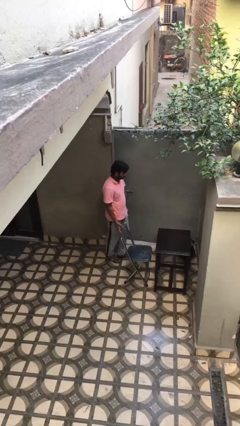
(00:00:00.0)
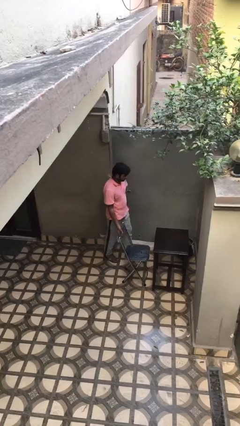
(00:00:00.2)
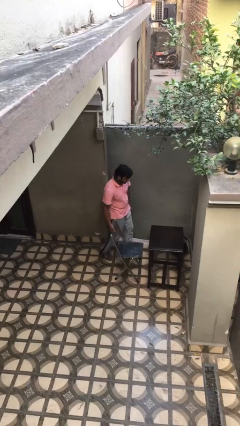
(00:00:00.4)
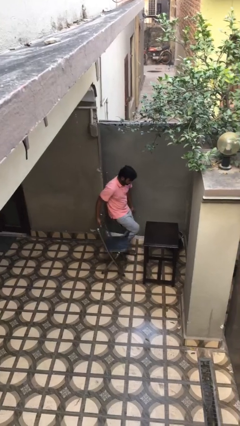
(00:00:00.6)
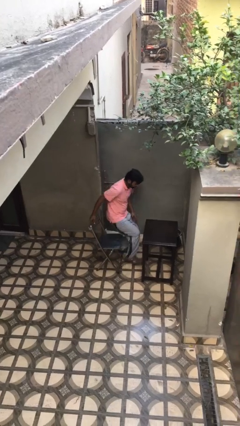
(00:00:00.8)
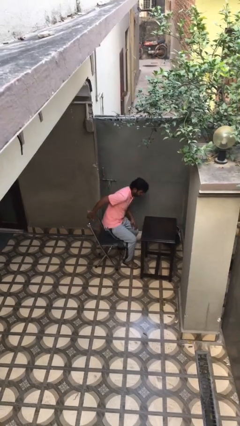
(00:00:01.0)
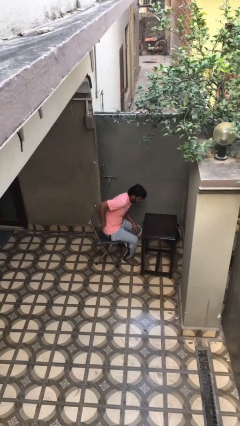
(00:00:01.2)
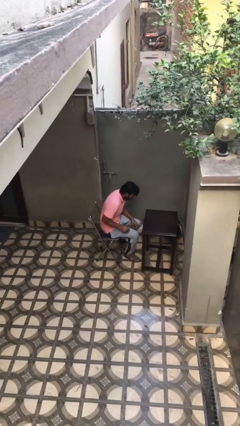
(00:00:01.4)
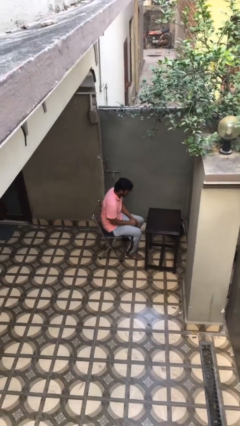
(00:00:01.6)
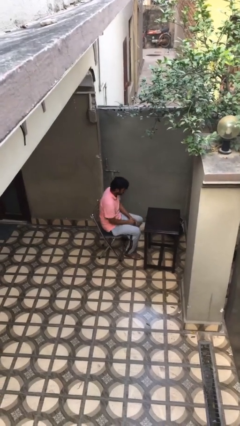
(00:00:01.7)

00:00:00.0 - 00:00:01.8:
person sits down

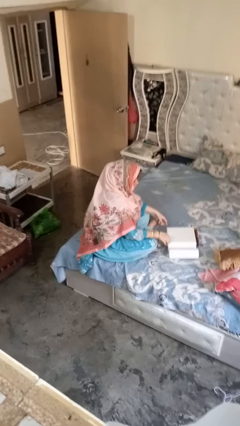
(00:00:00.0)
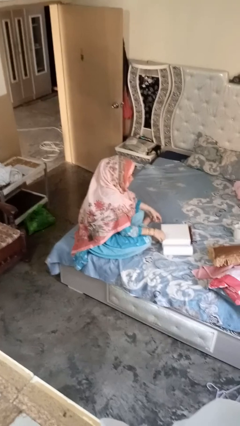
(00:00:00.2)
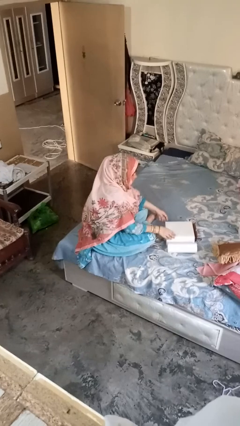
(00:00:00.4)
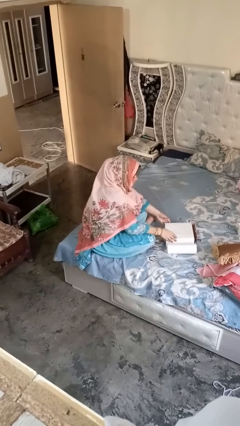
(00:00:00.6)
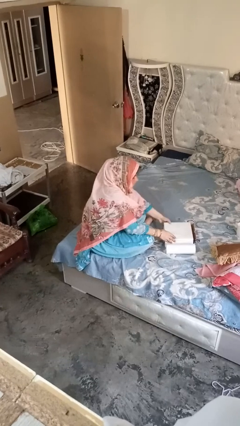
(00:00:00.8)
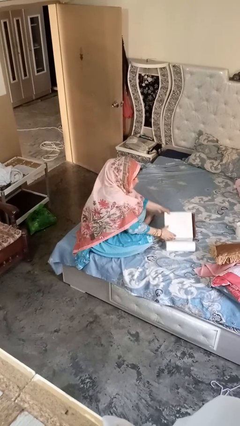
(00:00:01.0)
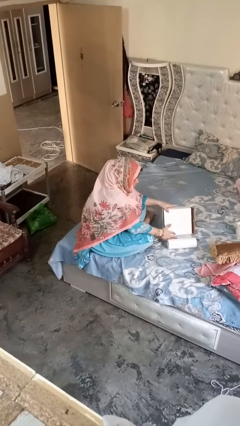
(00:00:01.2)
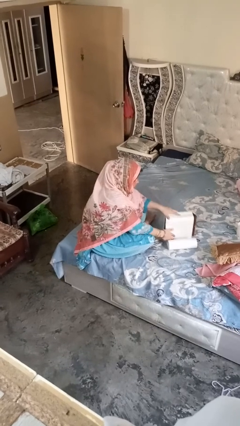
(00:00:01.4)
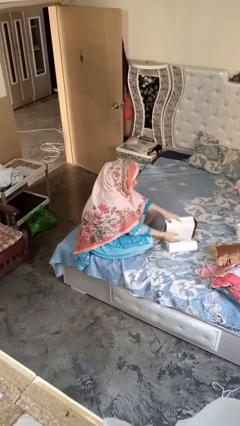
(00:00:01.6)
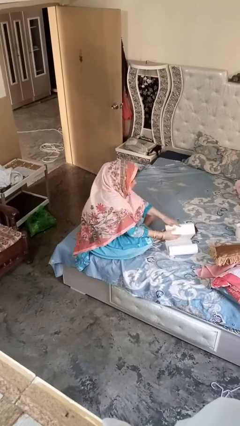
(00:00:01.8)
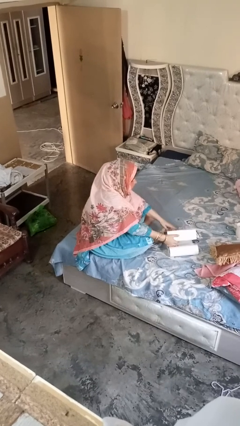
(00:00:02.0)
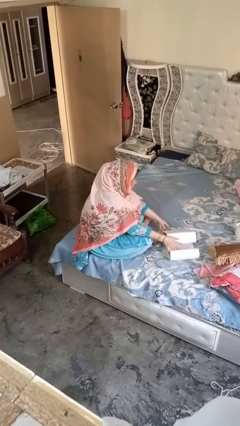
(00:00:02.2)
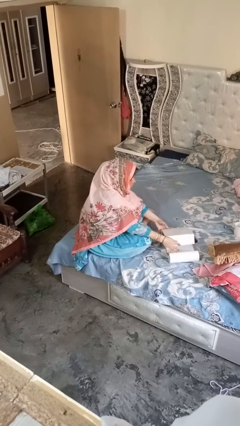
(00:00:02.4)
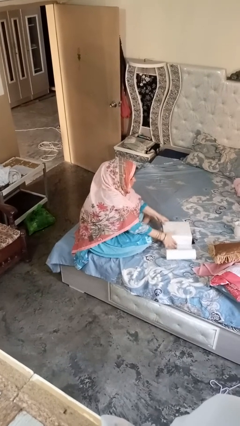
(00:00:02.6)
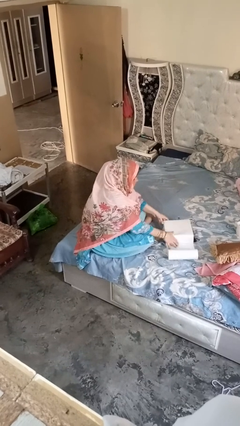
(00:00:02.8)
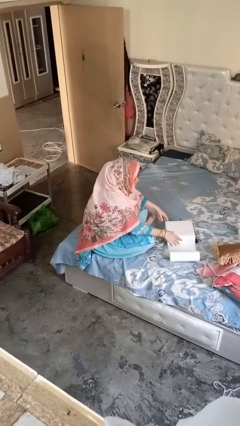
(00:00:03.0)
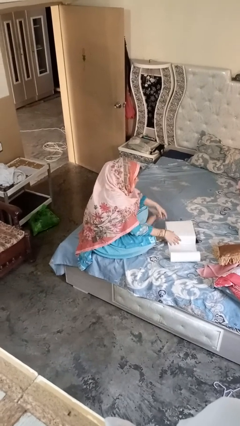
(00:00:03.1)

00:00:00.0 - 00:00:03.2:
person wraps box

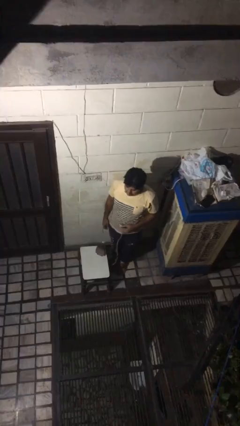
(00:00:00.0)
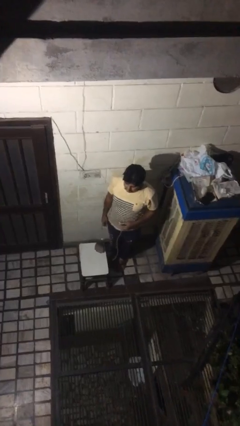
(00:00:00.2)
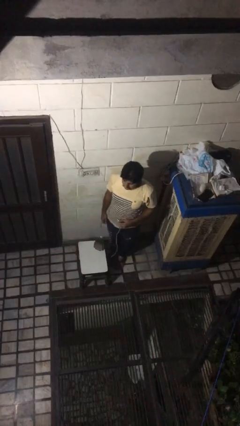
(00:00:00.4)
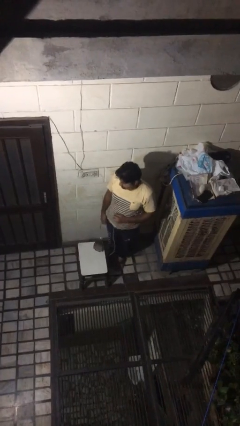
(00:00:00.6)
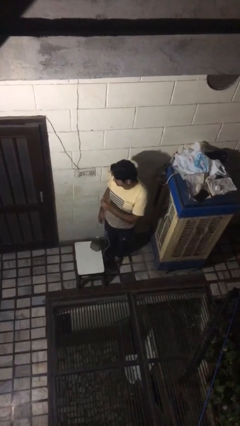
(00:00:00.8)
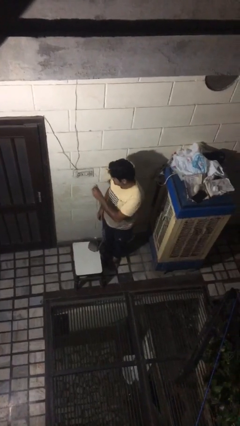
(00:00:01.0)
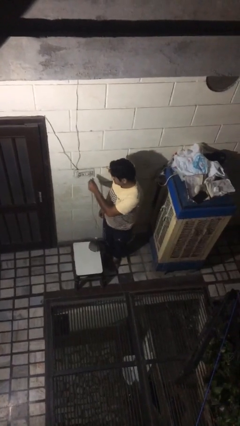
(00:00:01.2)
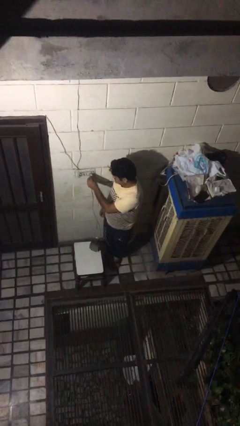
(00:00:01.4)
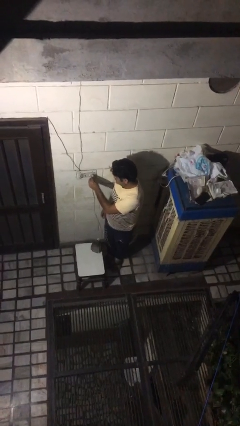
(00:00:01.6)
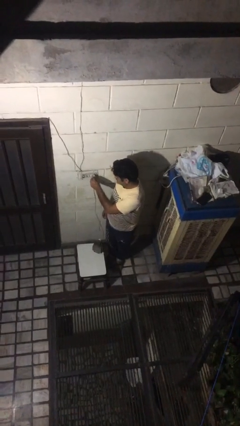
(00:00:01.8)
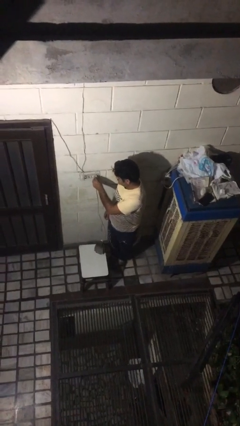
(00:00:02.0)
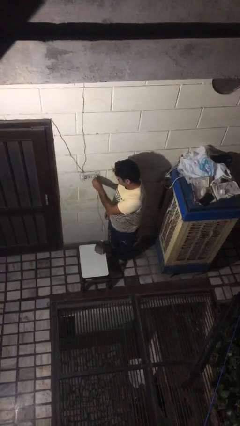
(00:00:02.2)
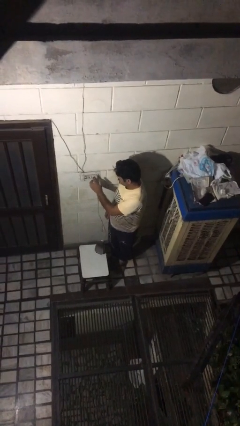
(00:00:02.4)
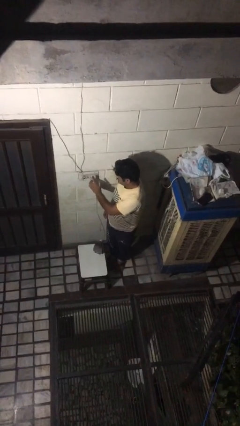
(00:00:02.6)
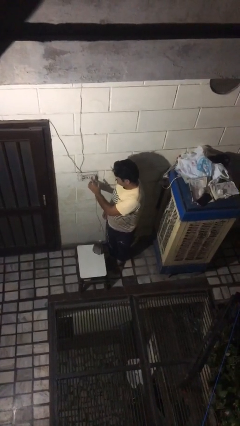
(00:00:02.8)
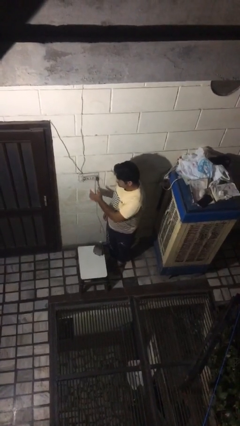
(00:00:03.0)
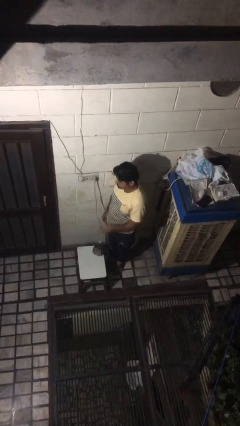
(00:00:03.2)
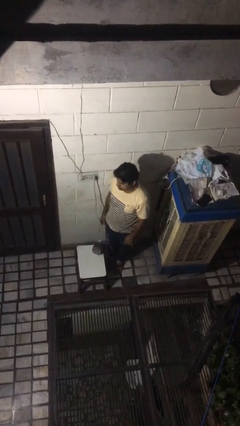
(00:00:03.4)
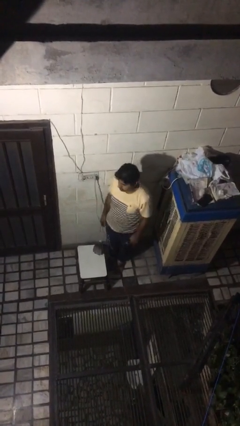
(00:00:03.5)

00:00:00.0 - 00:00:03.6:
person plugs into electrical socket

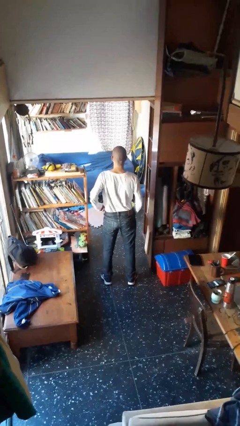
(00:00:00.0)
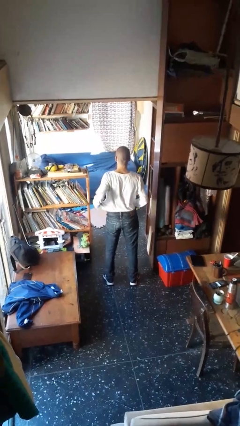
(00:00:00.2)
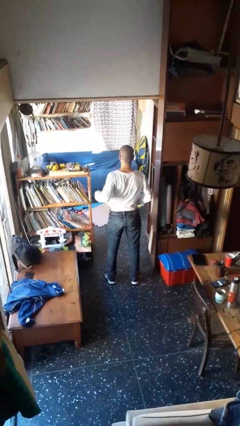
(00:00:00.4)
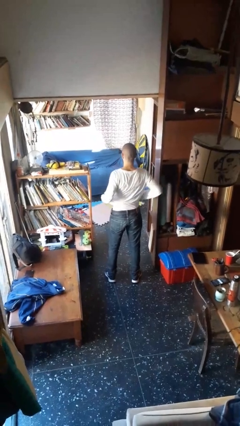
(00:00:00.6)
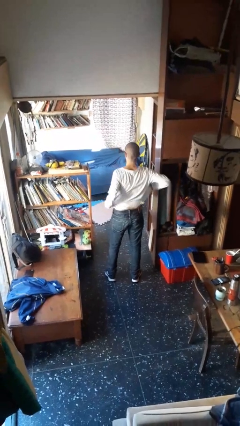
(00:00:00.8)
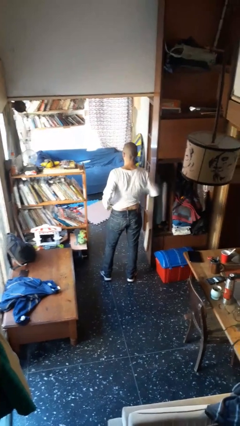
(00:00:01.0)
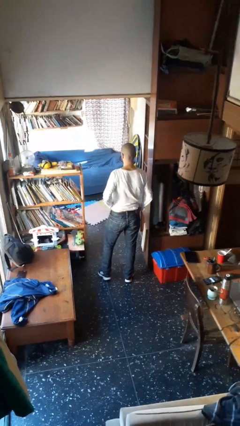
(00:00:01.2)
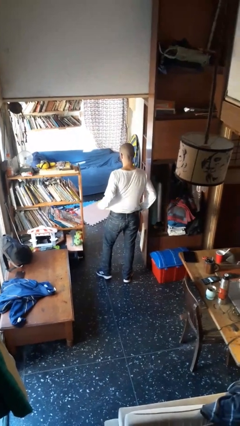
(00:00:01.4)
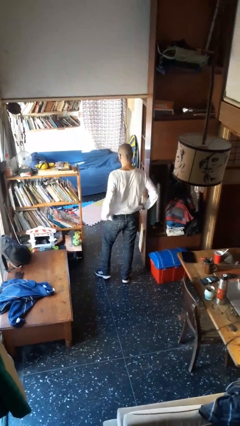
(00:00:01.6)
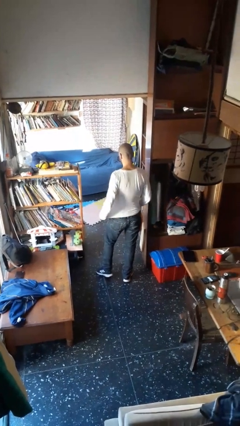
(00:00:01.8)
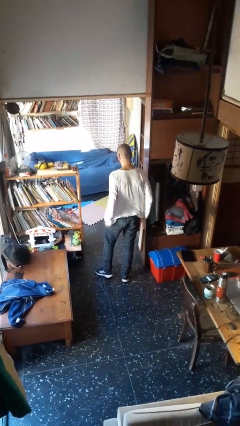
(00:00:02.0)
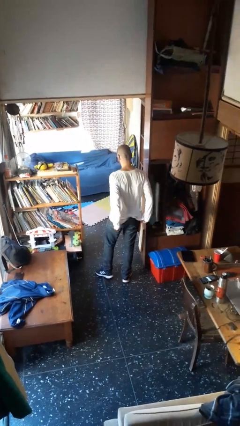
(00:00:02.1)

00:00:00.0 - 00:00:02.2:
person untucks shirt

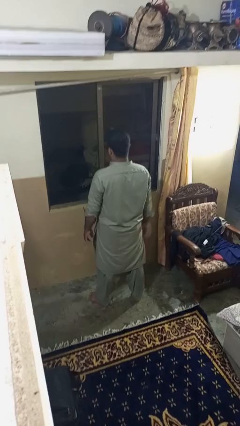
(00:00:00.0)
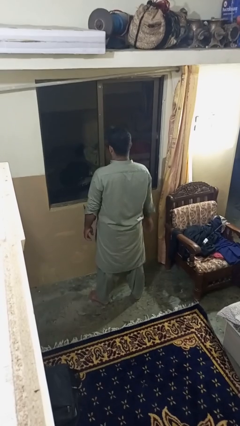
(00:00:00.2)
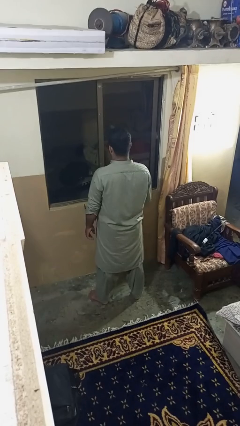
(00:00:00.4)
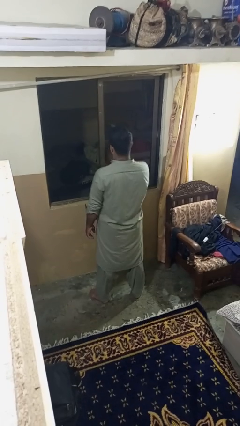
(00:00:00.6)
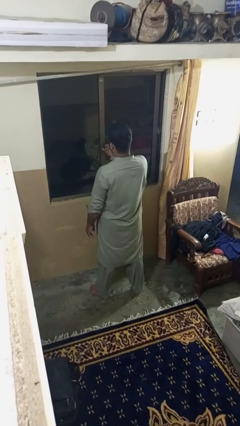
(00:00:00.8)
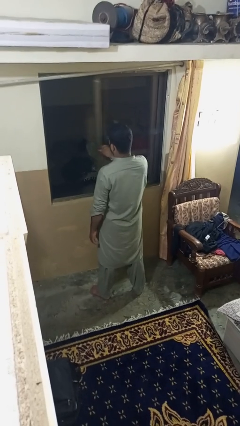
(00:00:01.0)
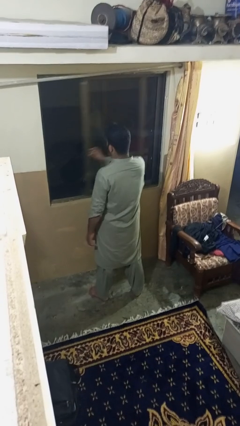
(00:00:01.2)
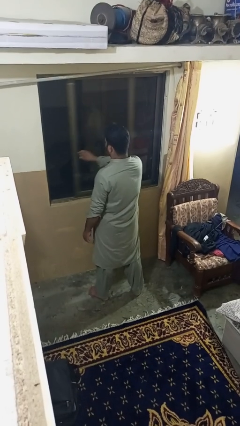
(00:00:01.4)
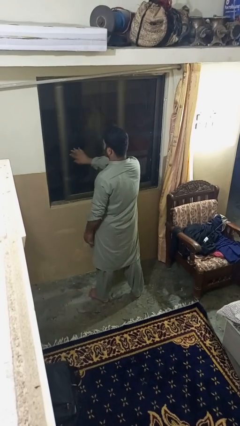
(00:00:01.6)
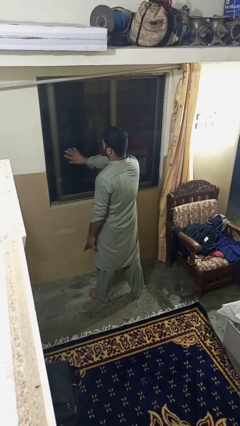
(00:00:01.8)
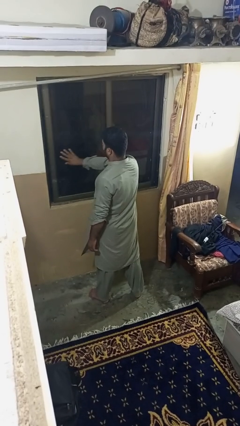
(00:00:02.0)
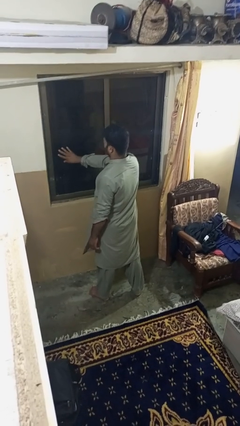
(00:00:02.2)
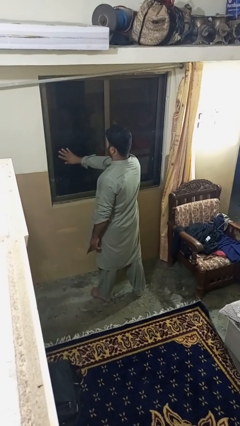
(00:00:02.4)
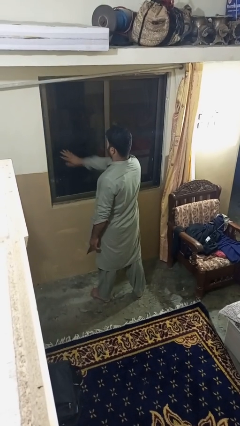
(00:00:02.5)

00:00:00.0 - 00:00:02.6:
person closes home window

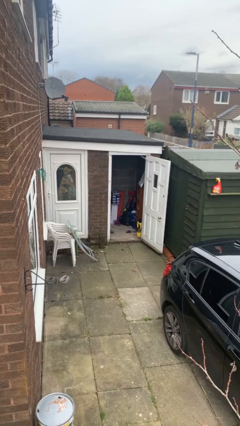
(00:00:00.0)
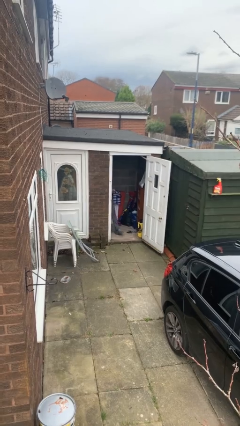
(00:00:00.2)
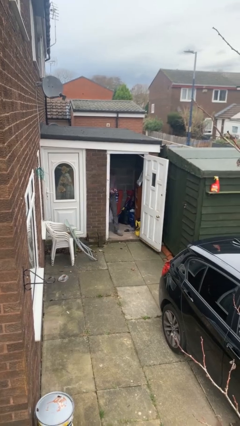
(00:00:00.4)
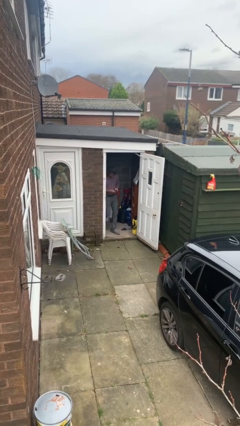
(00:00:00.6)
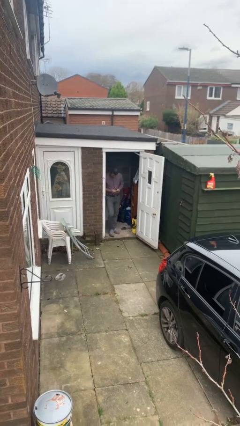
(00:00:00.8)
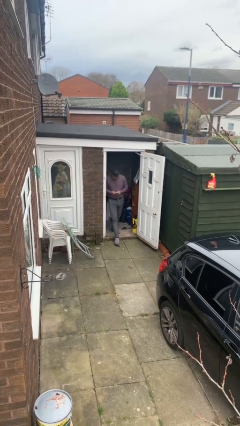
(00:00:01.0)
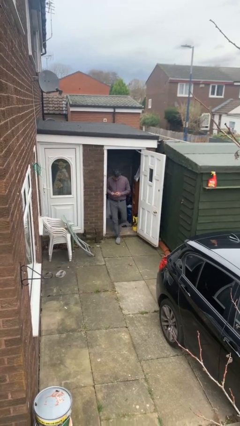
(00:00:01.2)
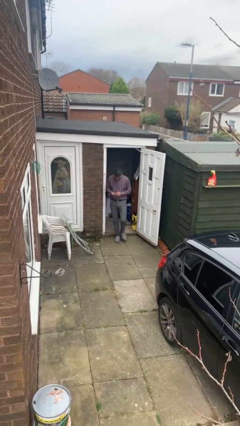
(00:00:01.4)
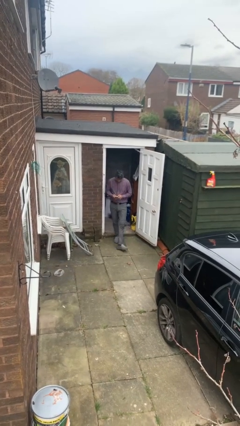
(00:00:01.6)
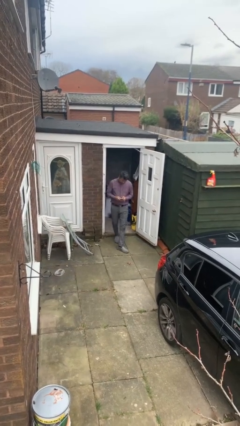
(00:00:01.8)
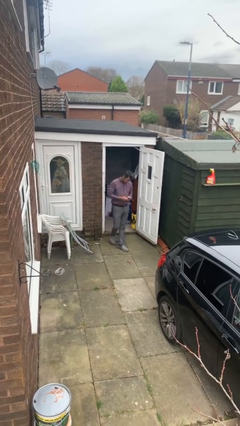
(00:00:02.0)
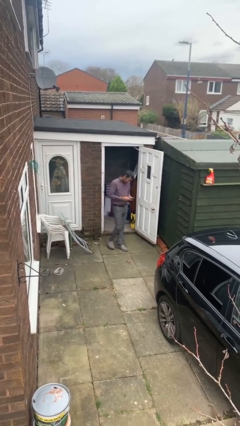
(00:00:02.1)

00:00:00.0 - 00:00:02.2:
person enters scene through structure

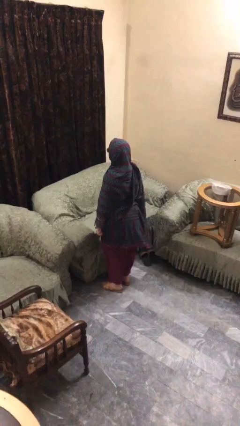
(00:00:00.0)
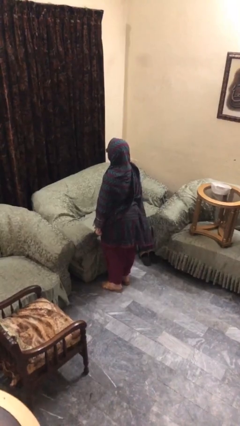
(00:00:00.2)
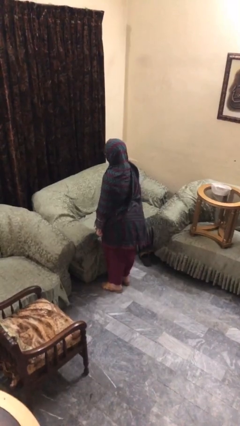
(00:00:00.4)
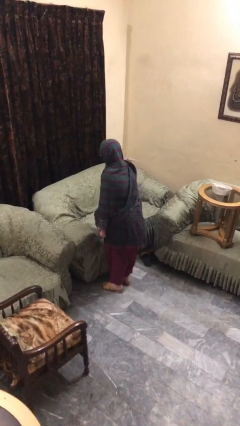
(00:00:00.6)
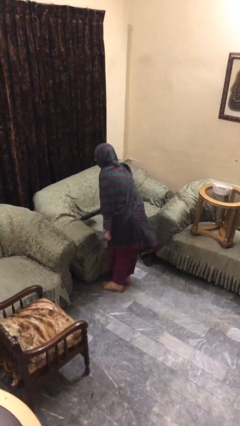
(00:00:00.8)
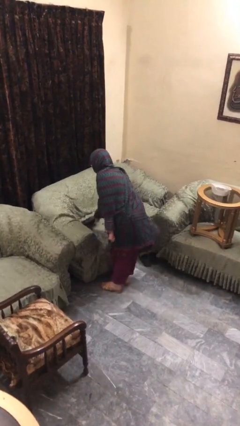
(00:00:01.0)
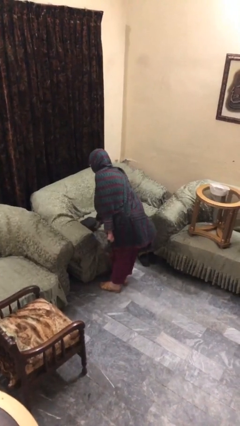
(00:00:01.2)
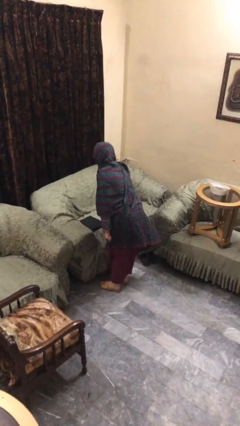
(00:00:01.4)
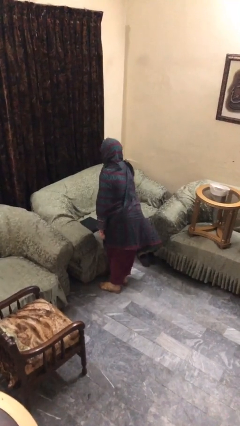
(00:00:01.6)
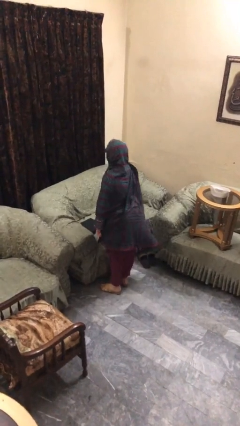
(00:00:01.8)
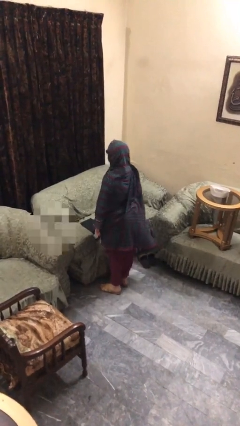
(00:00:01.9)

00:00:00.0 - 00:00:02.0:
person puts down object on couch
